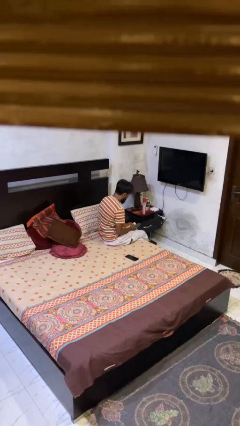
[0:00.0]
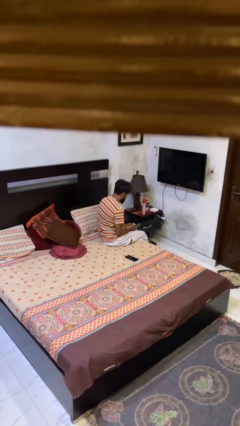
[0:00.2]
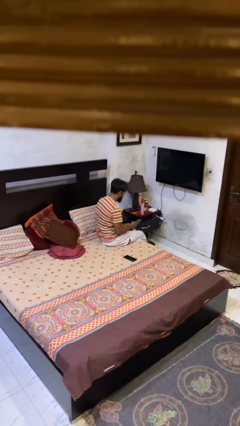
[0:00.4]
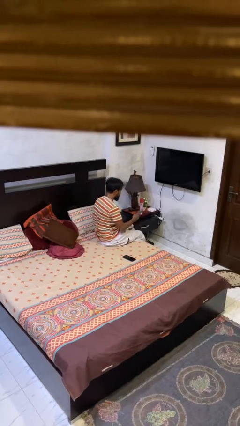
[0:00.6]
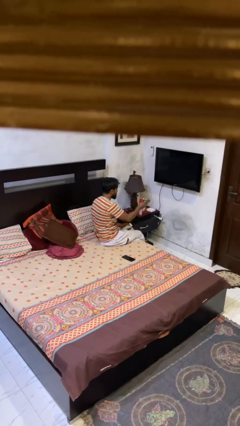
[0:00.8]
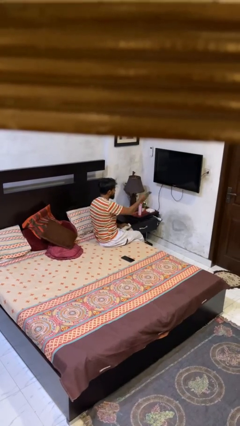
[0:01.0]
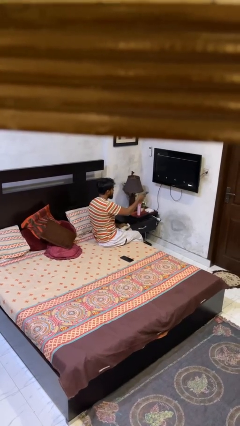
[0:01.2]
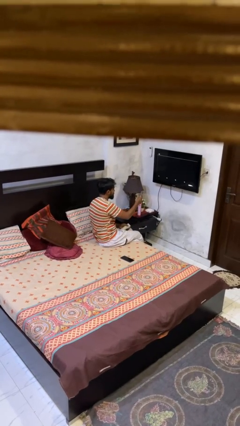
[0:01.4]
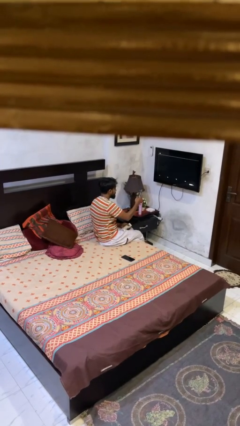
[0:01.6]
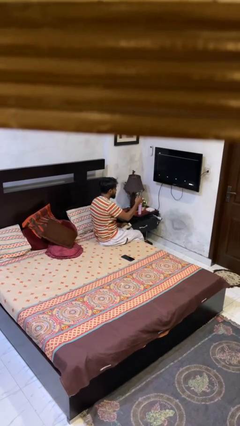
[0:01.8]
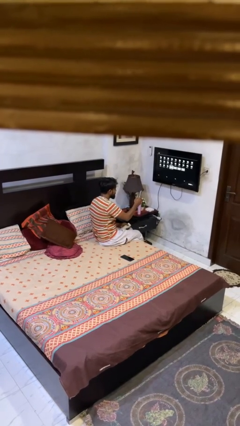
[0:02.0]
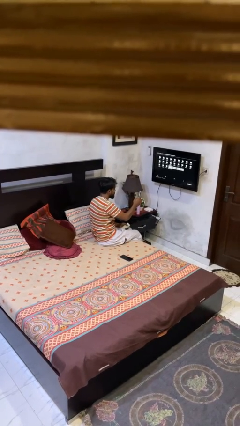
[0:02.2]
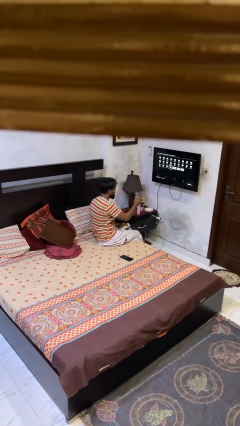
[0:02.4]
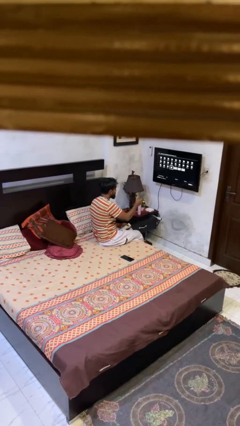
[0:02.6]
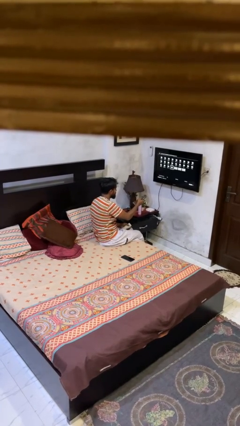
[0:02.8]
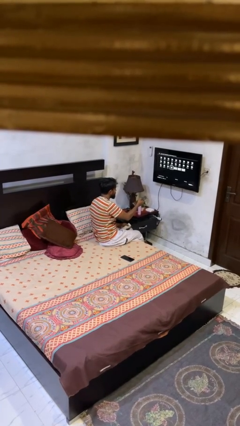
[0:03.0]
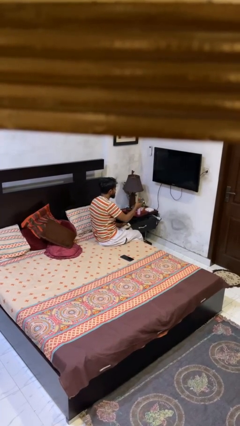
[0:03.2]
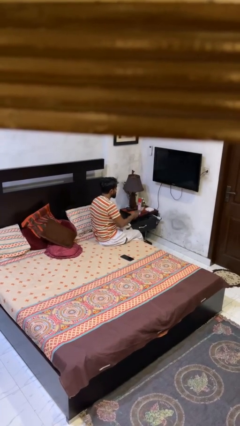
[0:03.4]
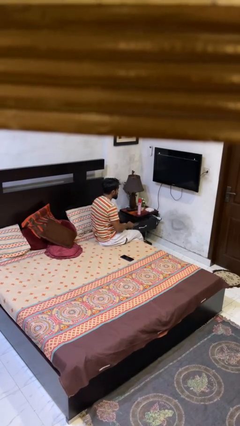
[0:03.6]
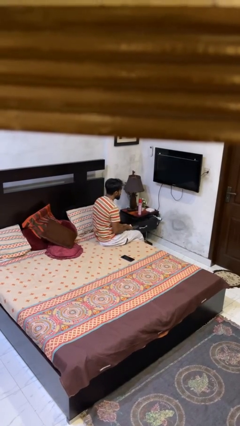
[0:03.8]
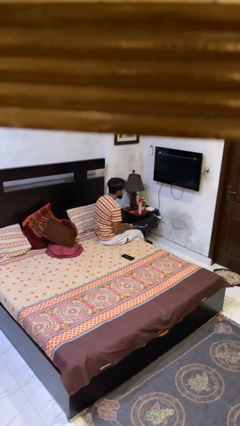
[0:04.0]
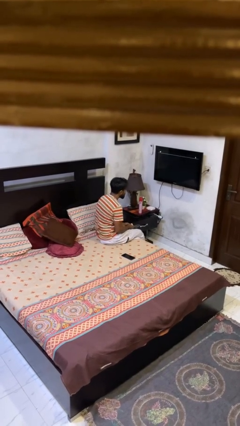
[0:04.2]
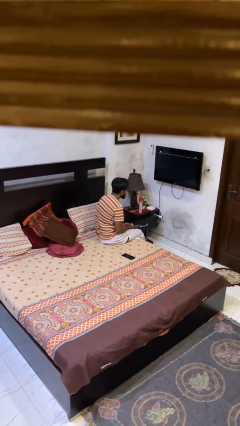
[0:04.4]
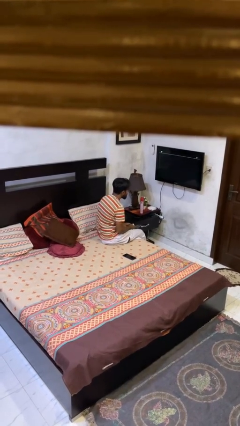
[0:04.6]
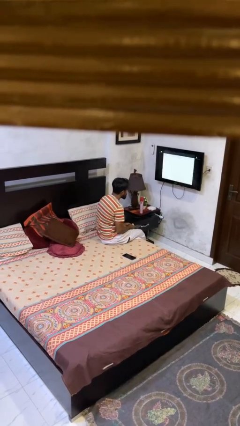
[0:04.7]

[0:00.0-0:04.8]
person uses television remote

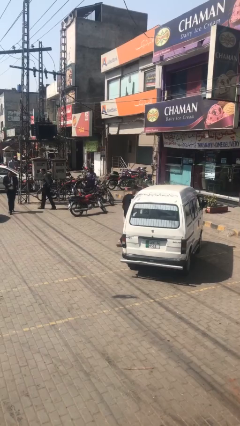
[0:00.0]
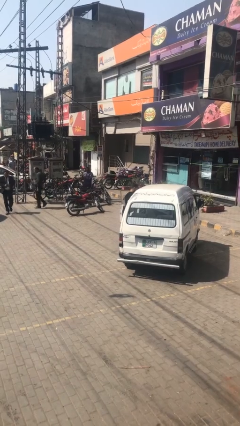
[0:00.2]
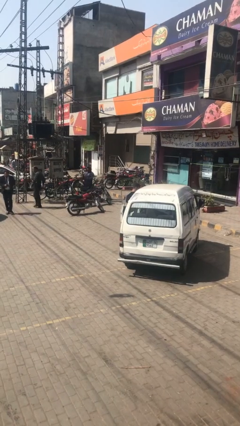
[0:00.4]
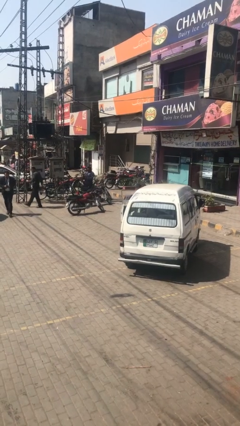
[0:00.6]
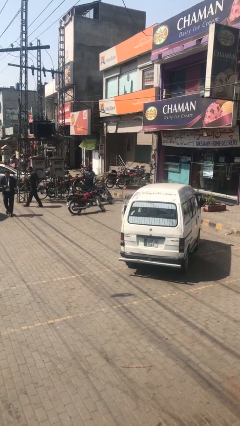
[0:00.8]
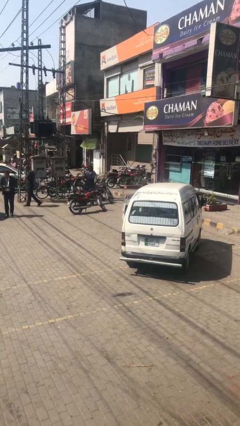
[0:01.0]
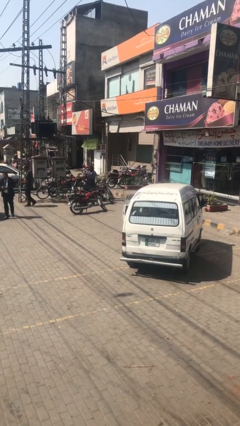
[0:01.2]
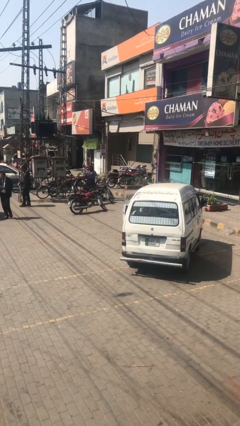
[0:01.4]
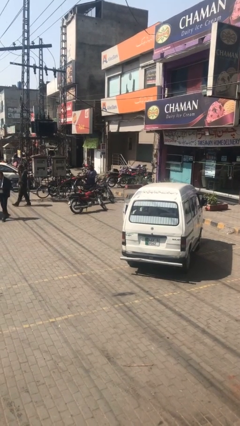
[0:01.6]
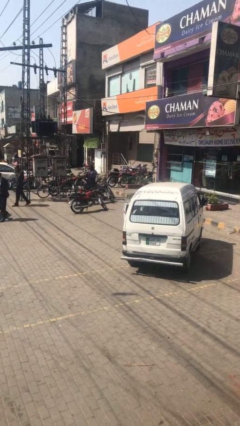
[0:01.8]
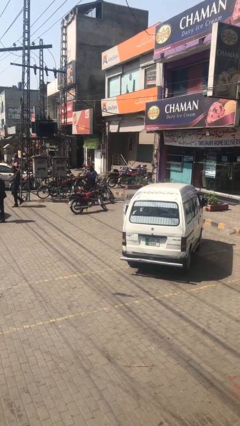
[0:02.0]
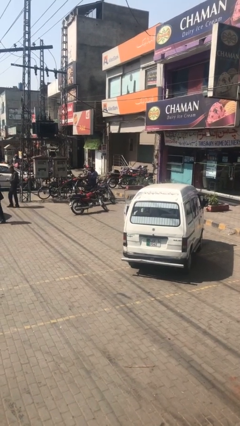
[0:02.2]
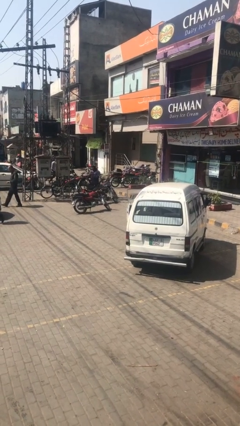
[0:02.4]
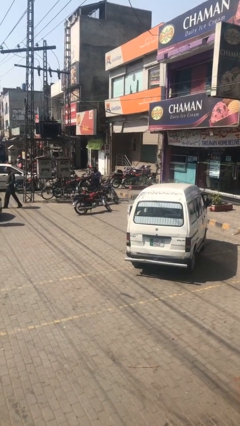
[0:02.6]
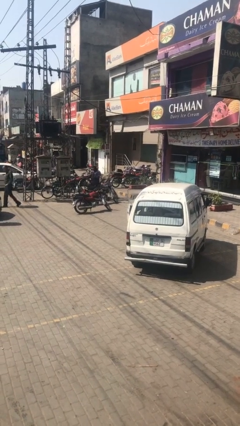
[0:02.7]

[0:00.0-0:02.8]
person exits car

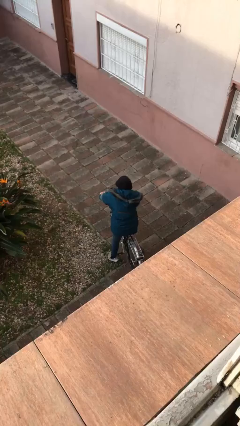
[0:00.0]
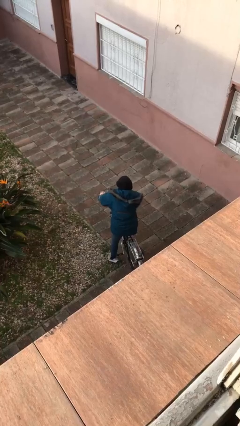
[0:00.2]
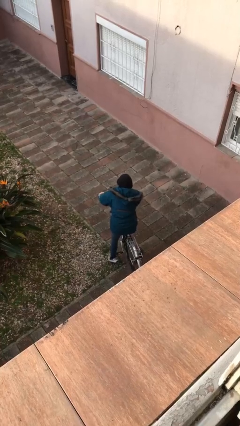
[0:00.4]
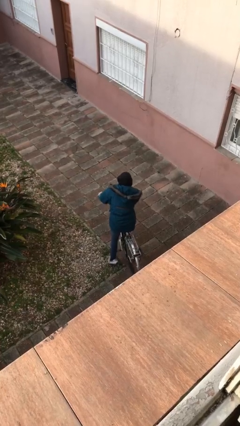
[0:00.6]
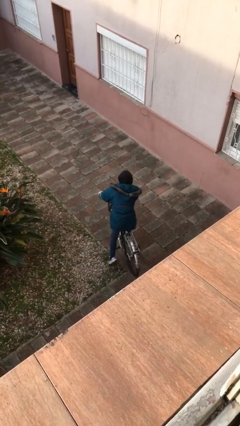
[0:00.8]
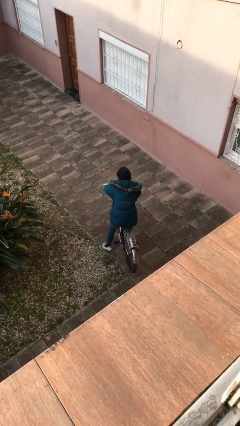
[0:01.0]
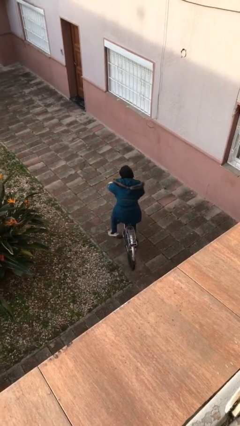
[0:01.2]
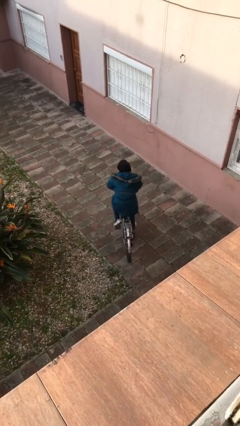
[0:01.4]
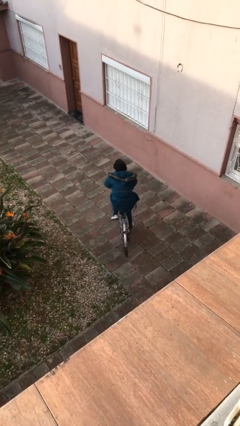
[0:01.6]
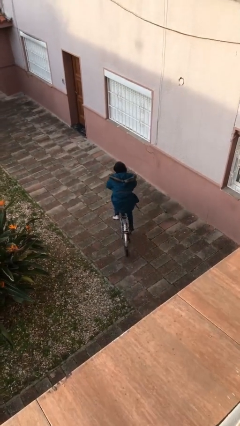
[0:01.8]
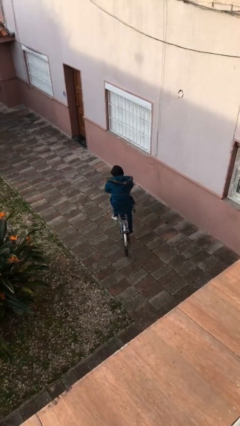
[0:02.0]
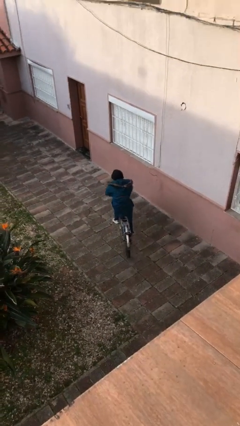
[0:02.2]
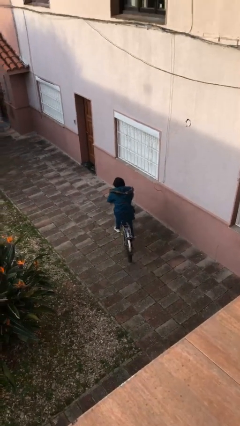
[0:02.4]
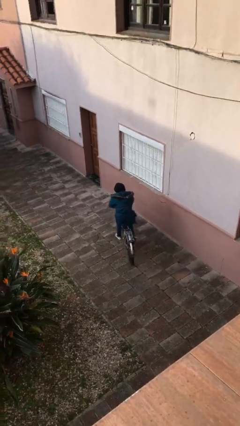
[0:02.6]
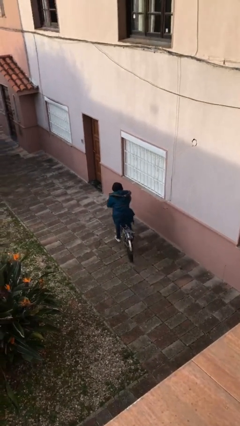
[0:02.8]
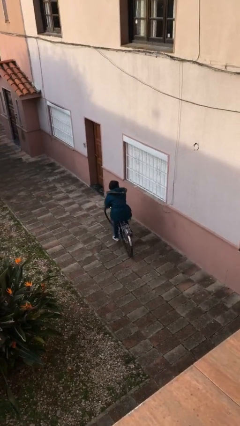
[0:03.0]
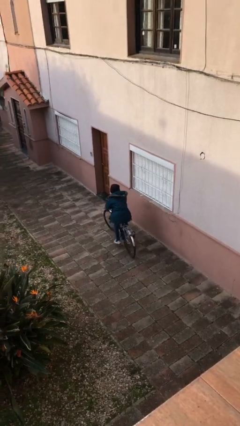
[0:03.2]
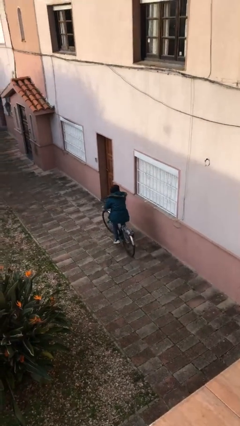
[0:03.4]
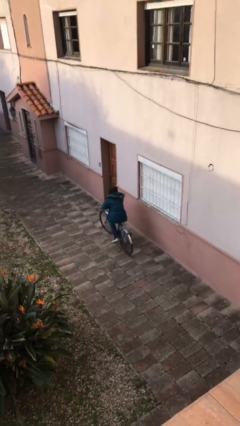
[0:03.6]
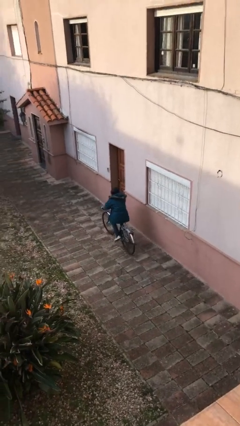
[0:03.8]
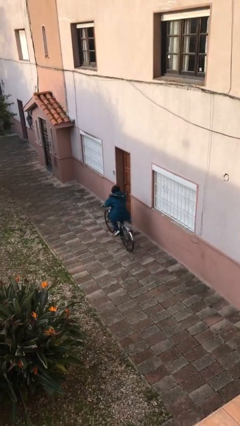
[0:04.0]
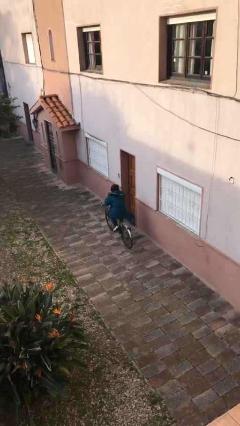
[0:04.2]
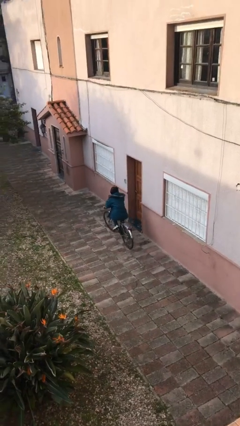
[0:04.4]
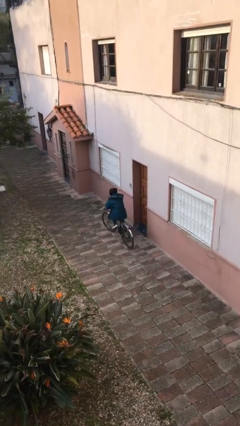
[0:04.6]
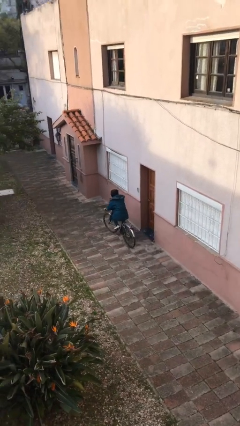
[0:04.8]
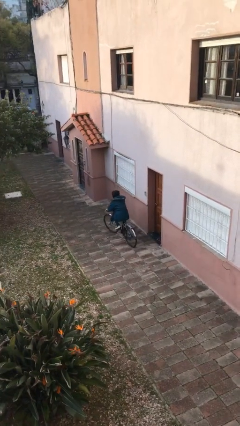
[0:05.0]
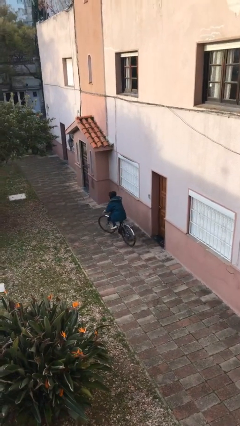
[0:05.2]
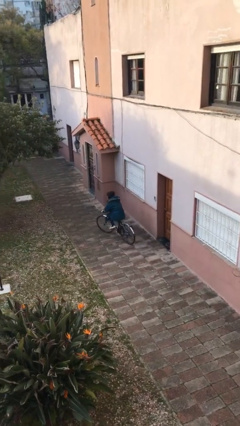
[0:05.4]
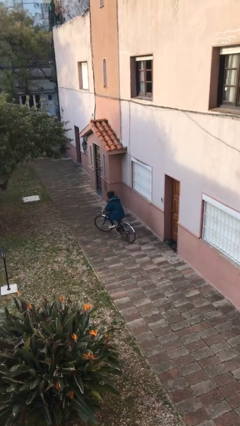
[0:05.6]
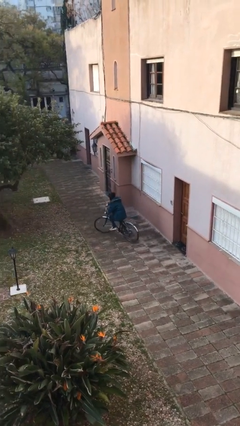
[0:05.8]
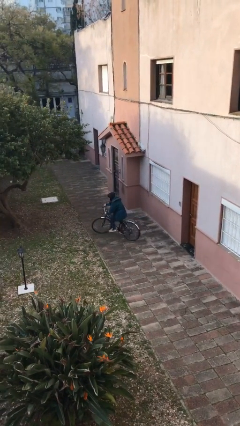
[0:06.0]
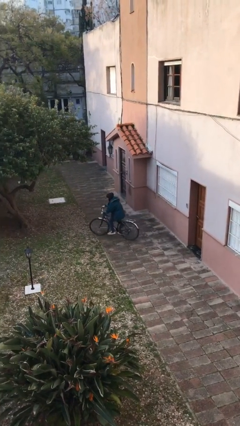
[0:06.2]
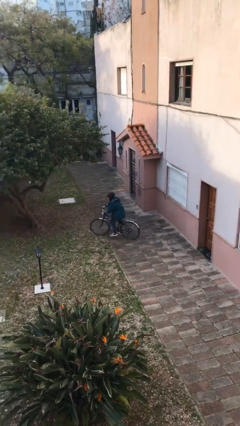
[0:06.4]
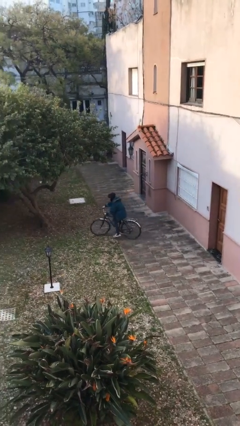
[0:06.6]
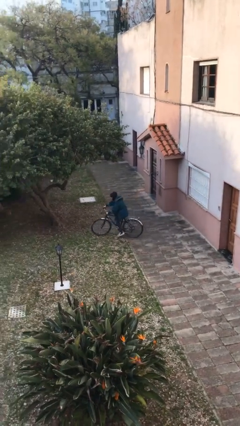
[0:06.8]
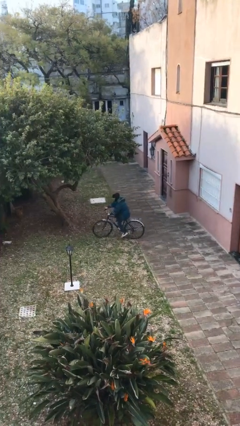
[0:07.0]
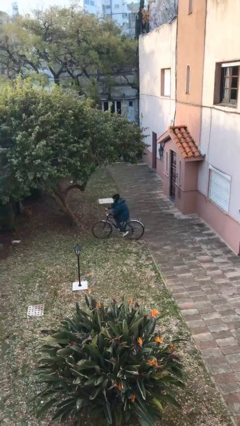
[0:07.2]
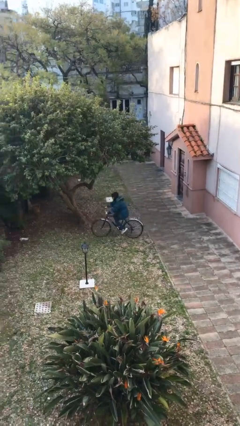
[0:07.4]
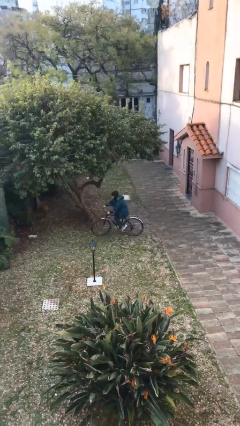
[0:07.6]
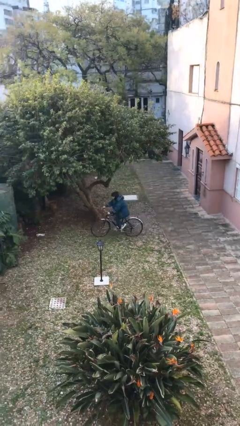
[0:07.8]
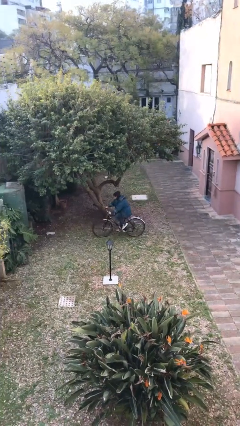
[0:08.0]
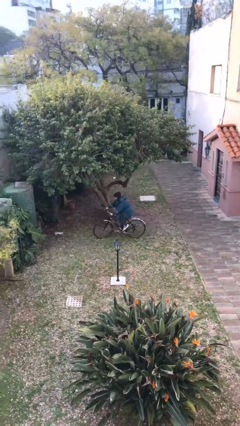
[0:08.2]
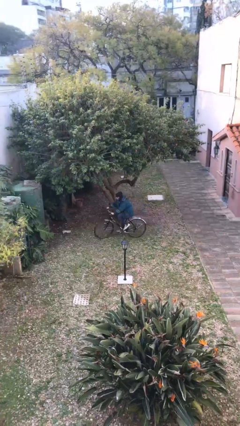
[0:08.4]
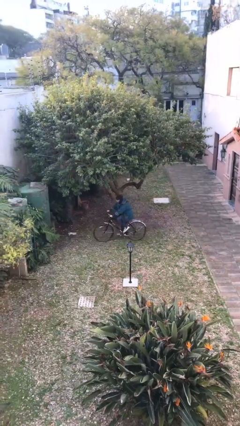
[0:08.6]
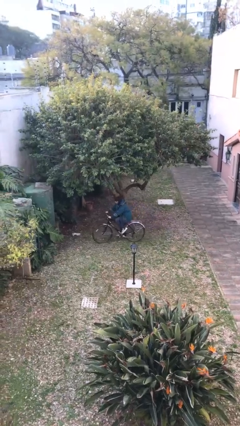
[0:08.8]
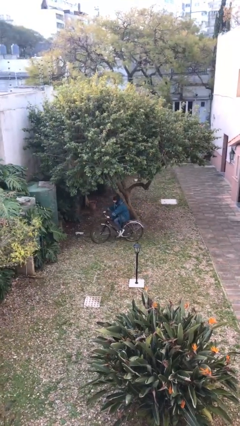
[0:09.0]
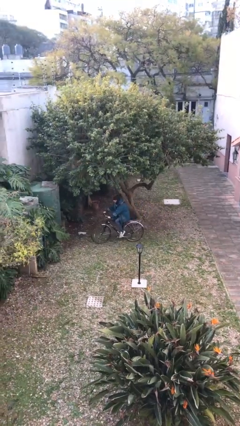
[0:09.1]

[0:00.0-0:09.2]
person rides bicycle

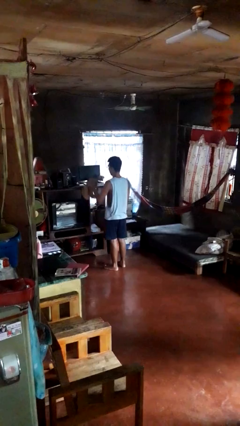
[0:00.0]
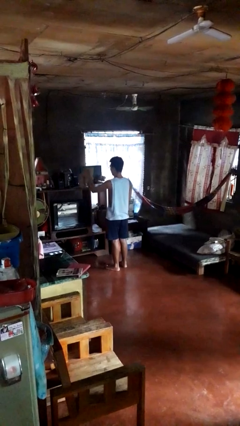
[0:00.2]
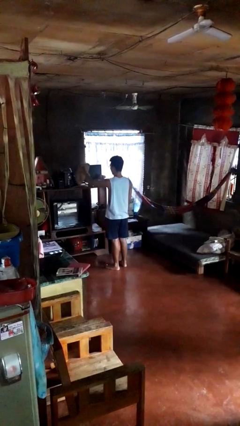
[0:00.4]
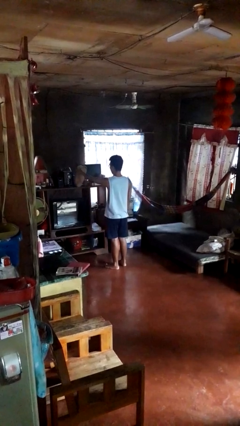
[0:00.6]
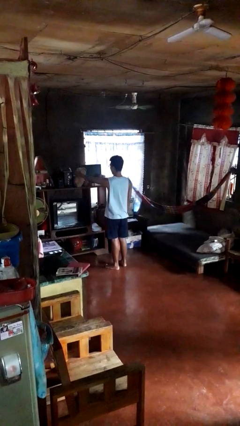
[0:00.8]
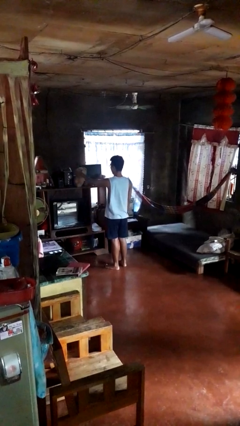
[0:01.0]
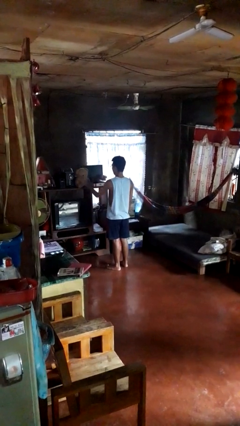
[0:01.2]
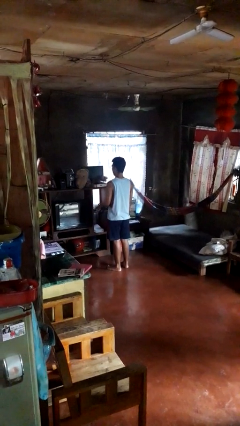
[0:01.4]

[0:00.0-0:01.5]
person puts down object on shelf
